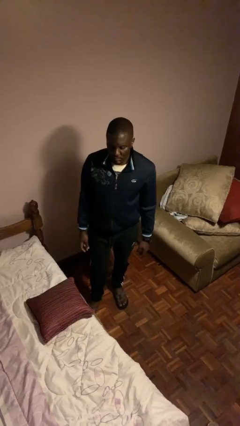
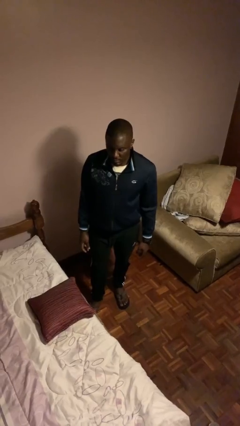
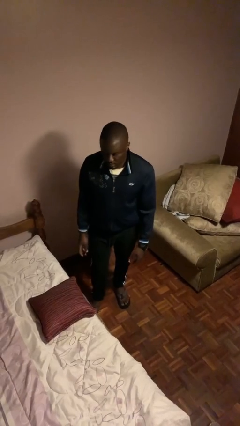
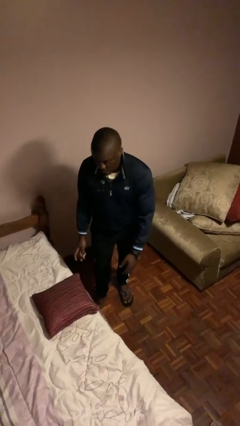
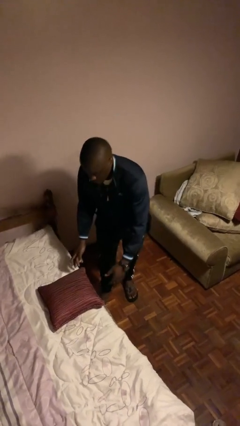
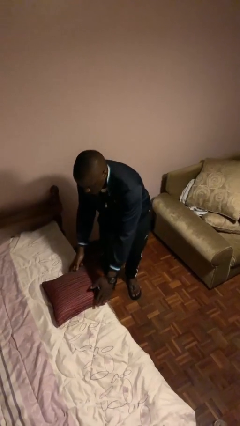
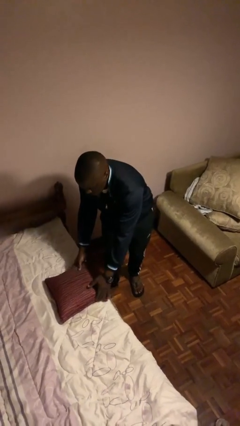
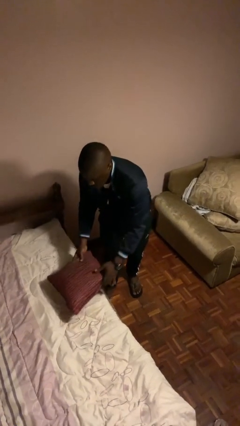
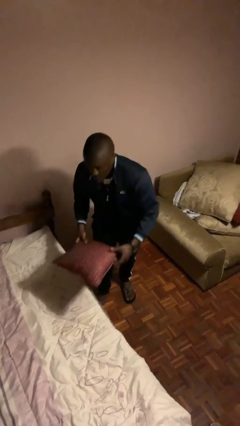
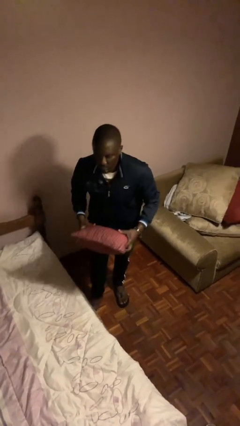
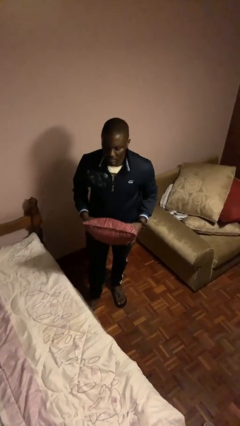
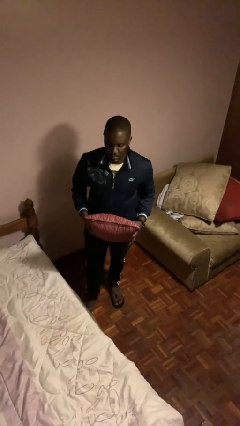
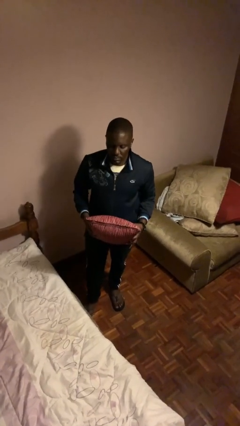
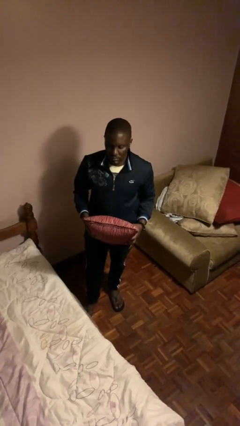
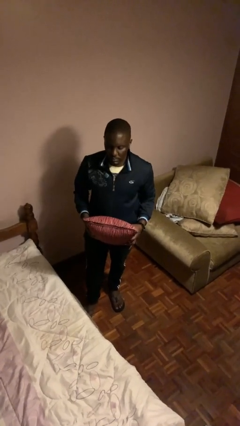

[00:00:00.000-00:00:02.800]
person picks up object from bed

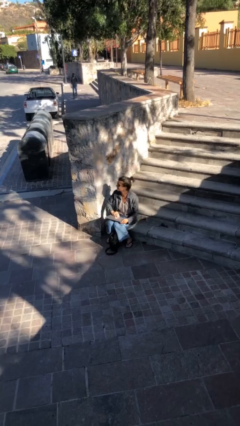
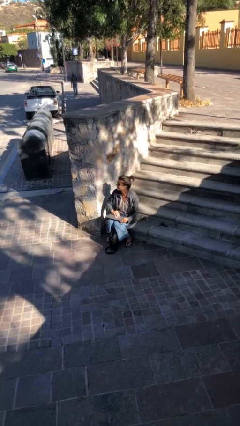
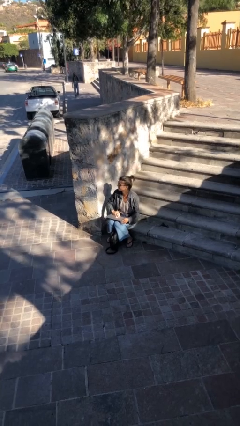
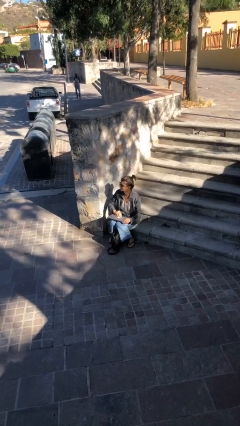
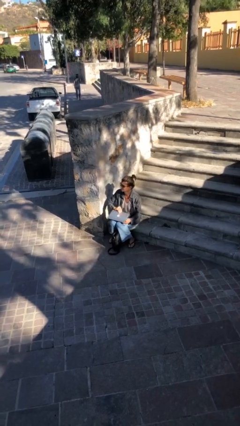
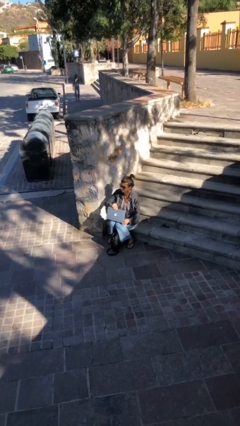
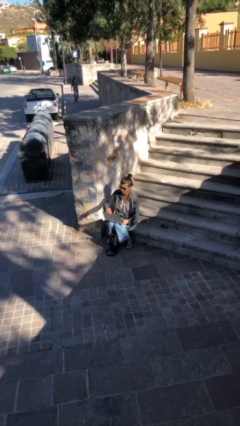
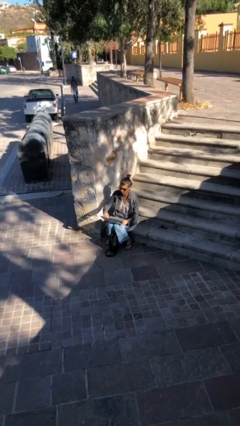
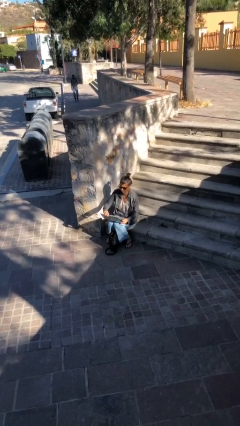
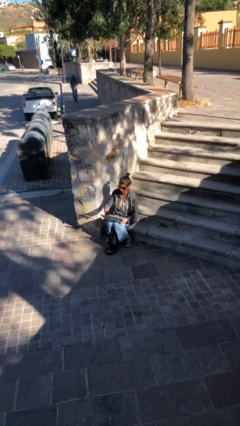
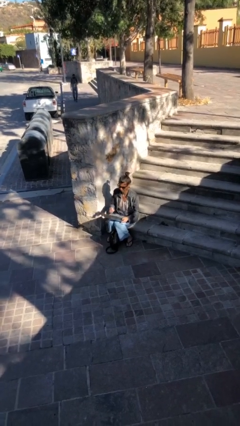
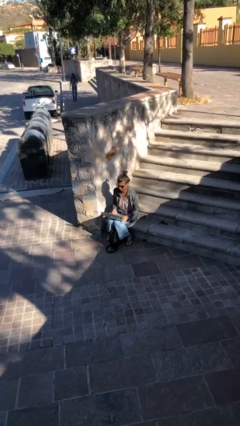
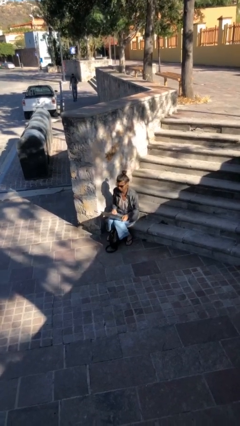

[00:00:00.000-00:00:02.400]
person interacts with laptop

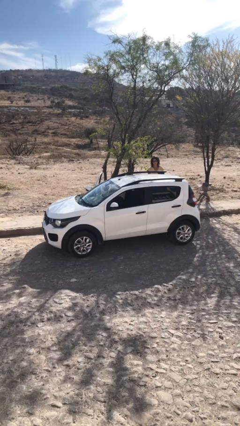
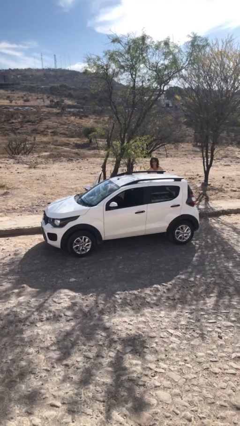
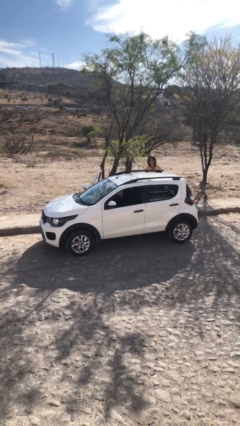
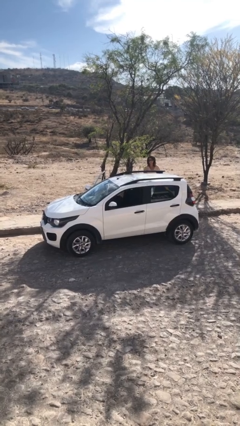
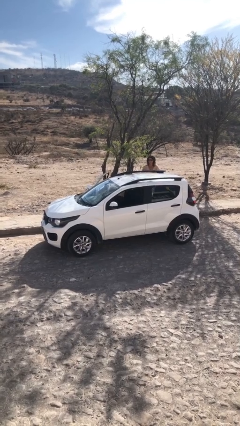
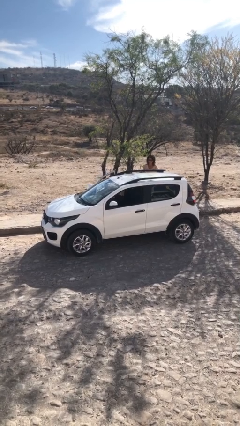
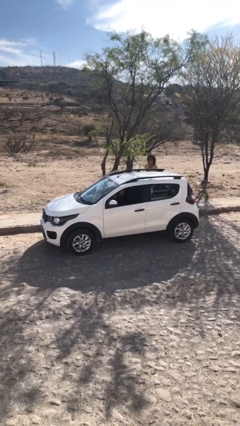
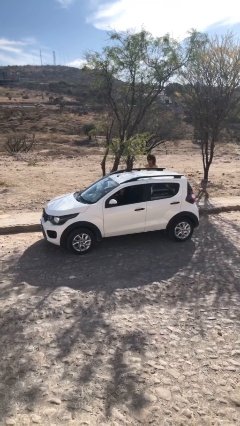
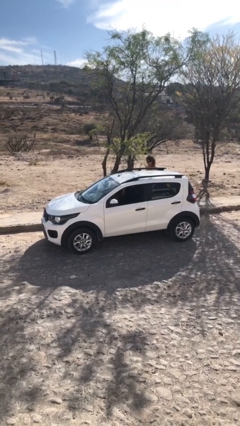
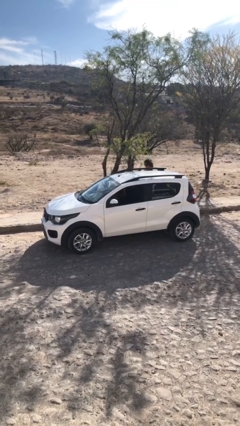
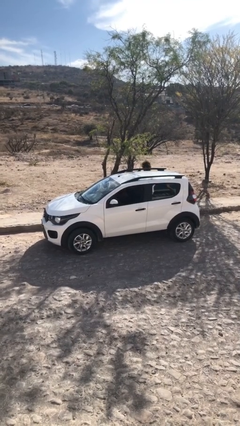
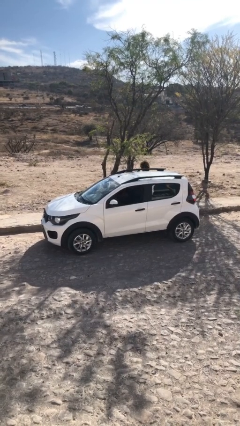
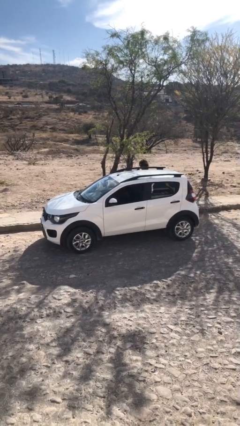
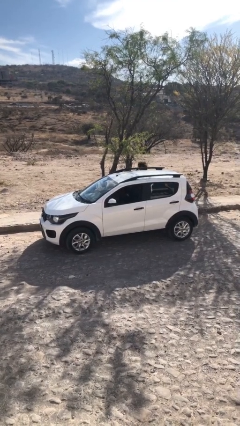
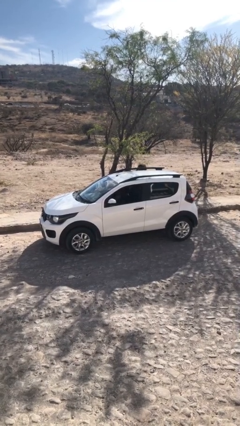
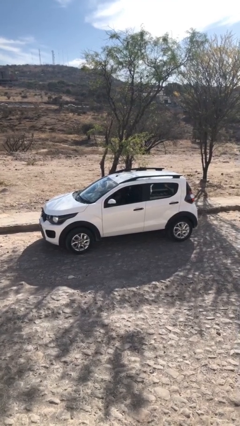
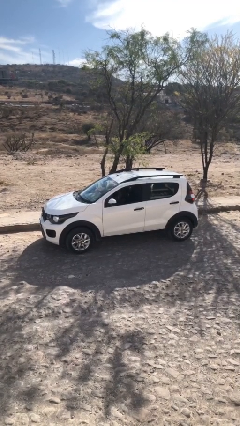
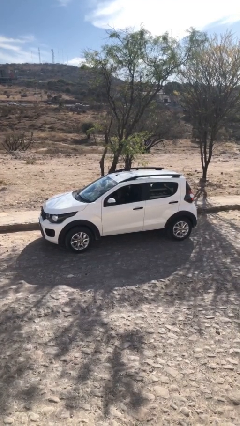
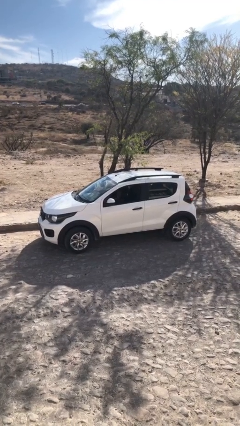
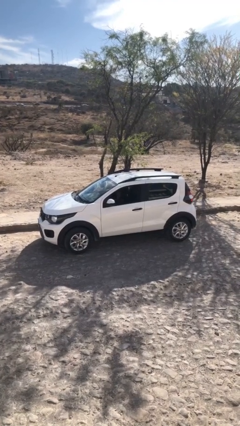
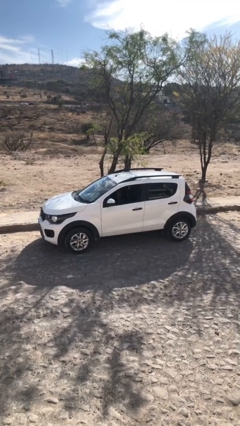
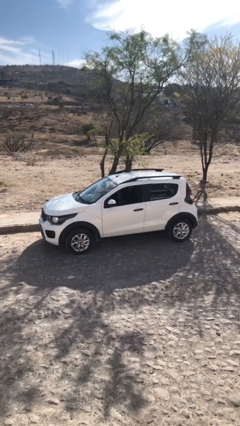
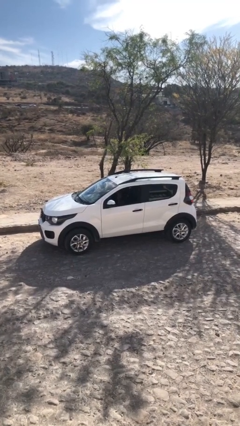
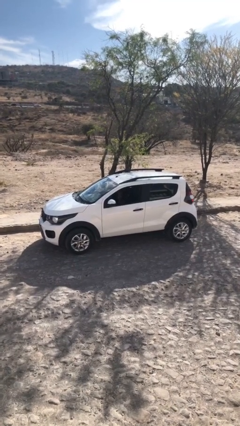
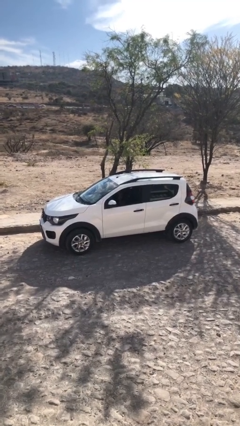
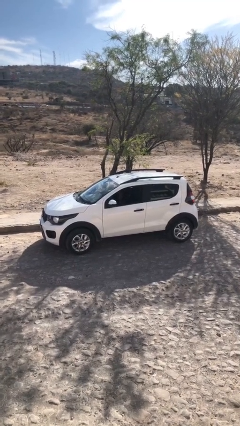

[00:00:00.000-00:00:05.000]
car picks up person

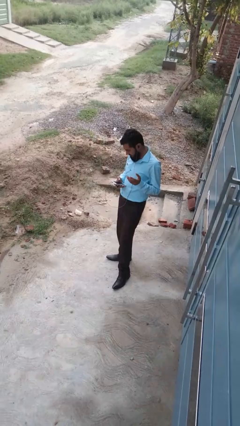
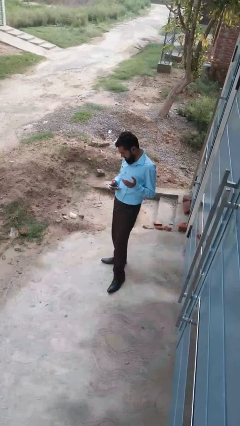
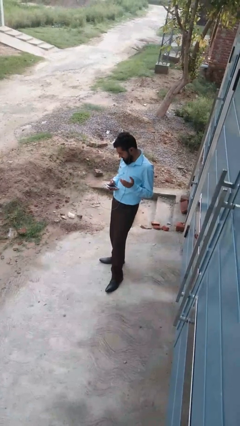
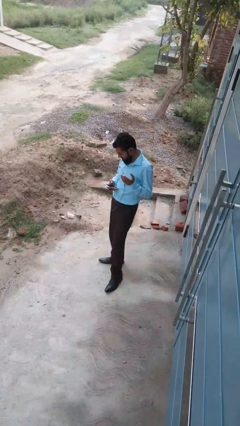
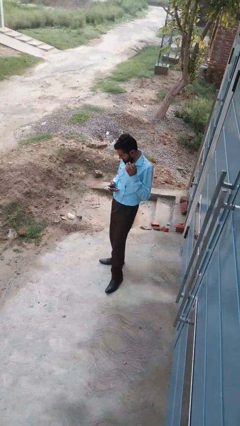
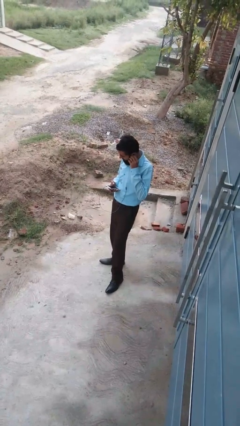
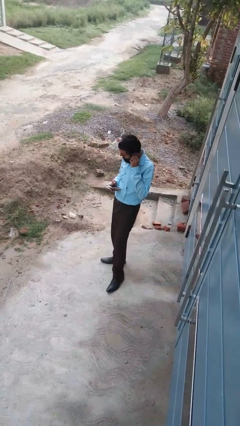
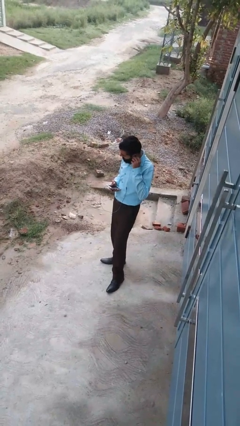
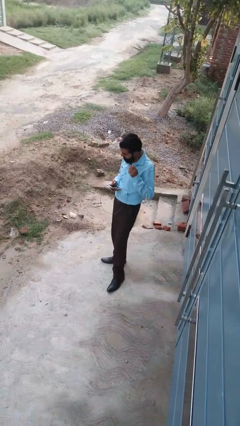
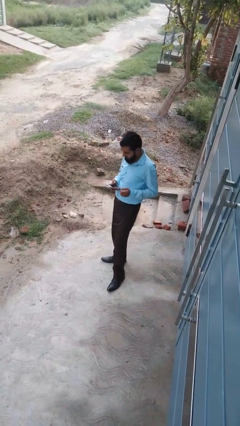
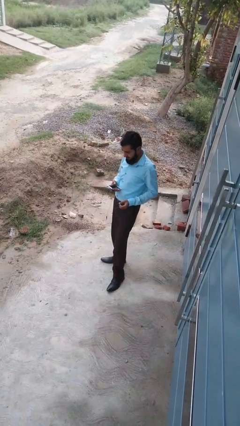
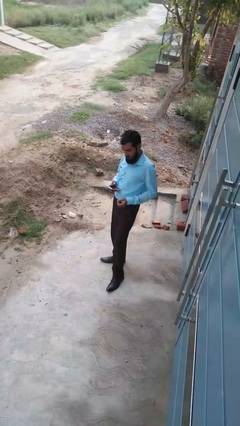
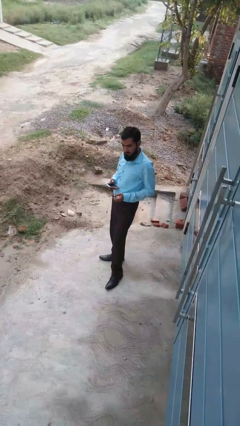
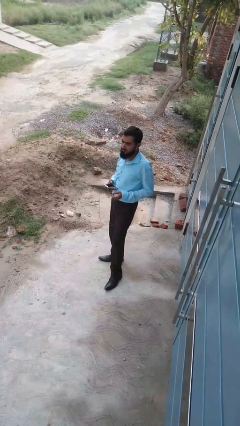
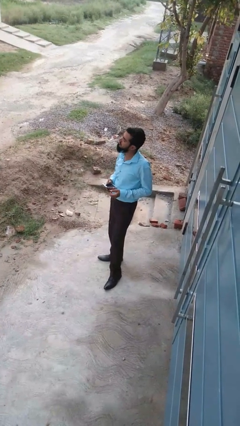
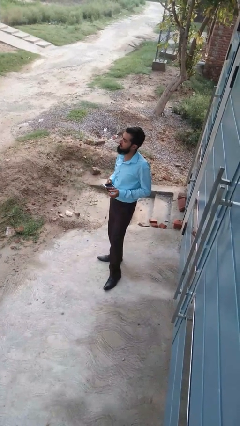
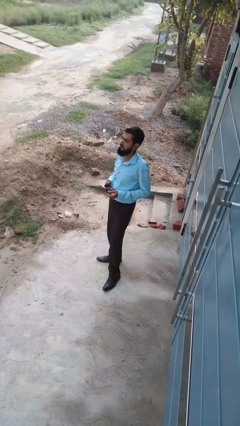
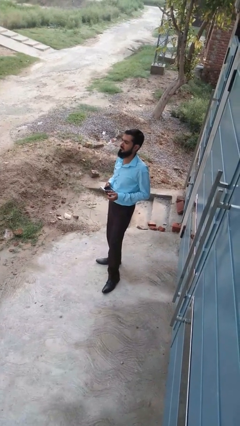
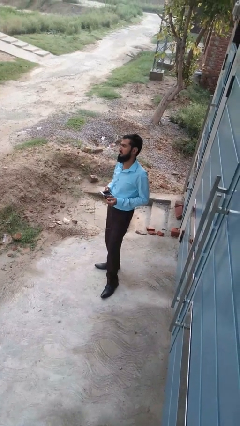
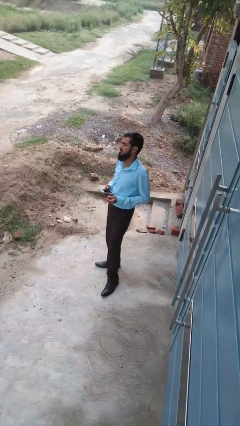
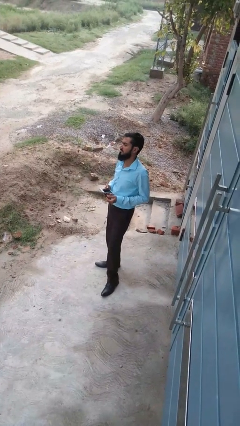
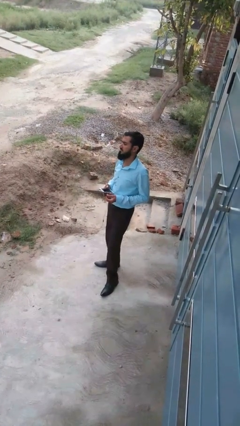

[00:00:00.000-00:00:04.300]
person takes off headphones

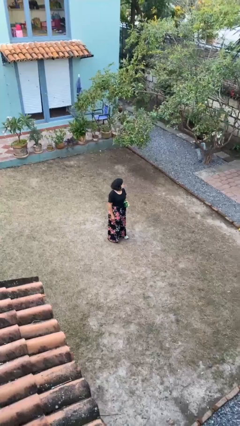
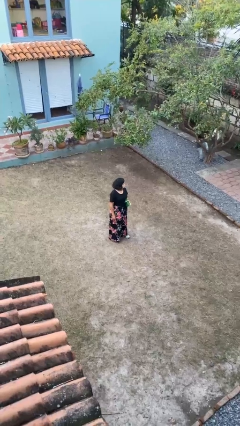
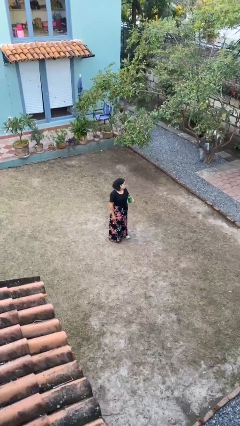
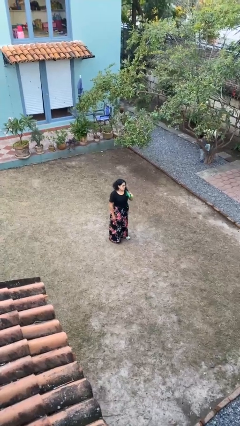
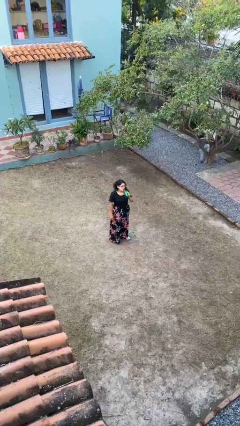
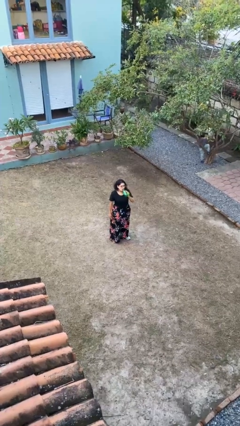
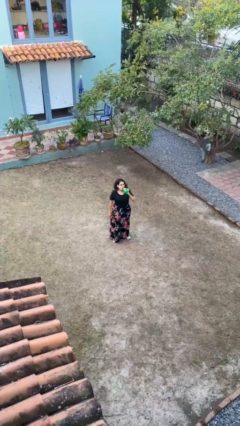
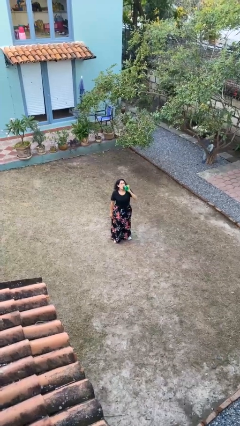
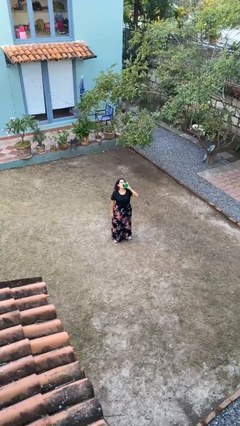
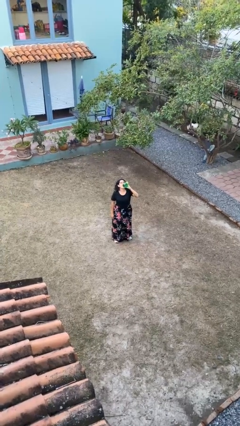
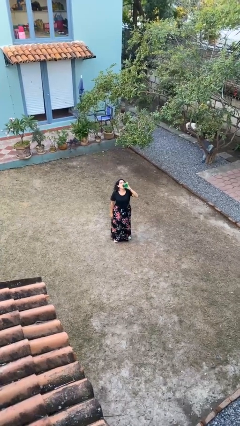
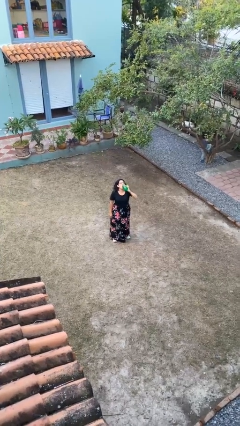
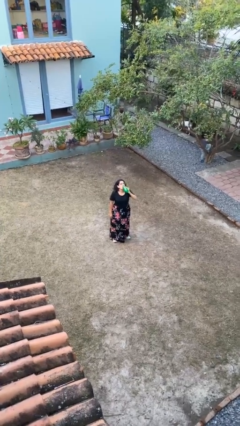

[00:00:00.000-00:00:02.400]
person drinks from bottle

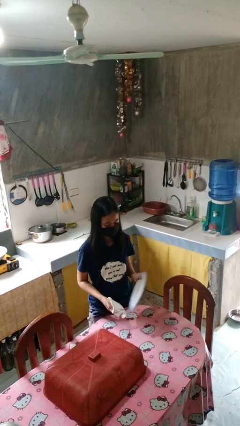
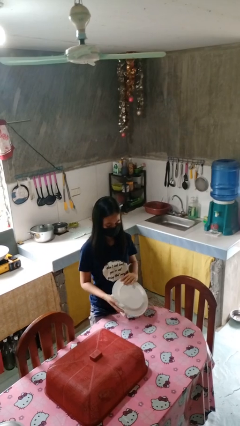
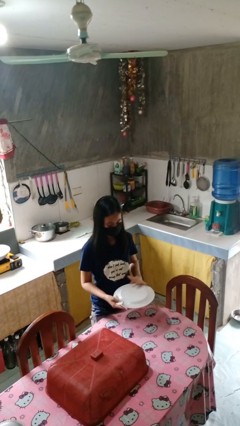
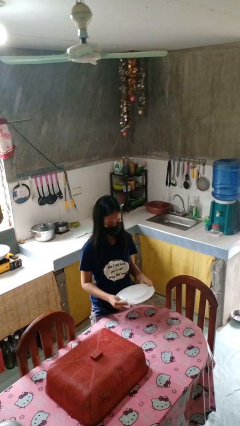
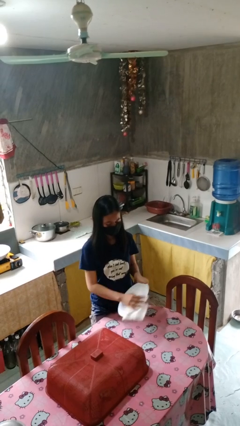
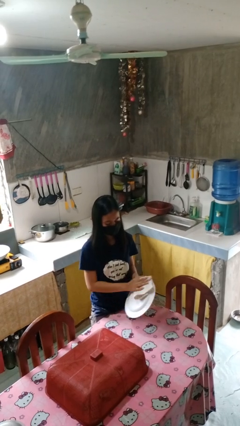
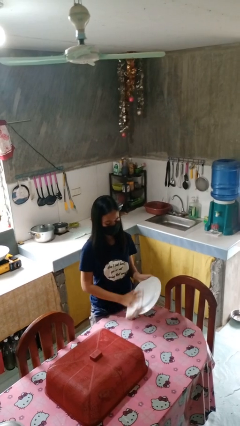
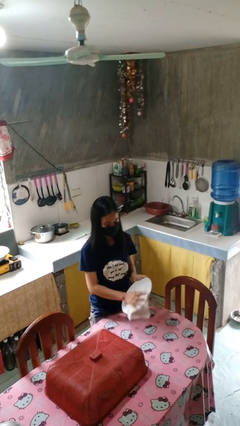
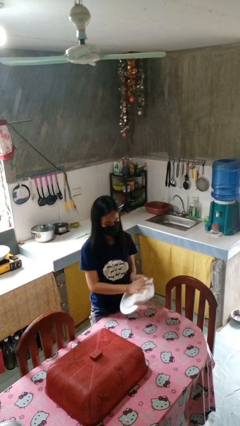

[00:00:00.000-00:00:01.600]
person dries dish
